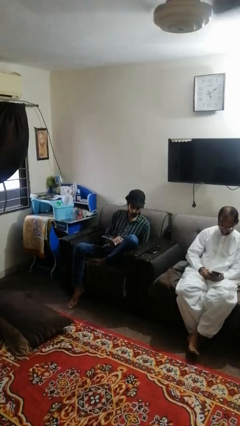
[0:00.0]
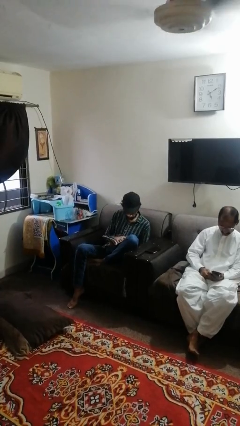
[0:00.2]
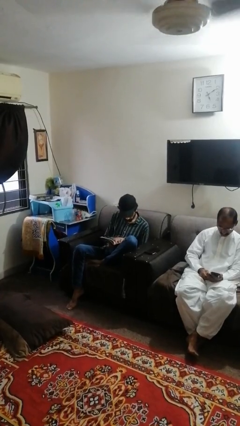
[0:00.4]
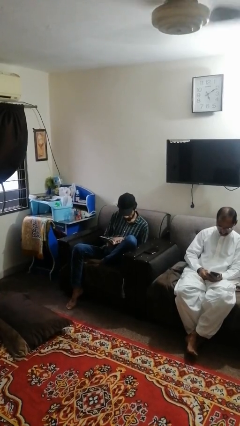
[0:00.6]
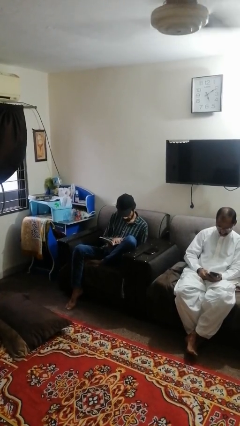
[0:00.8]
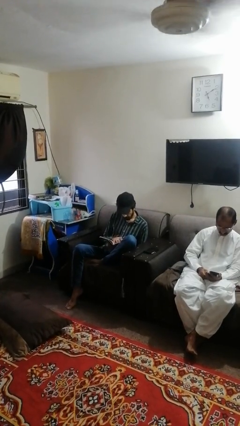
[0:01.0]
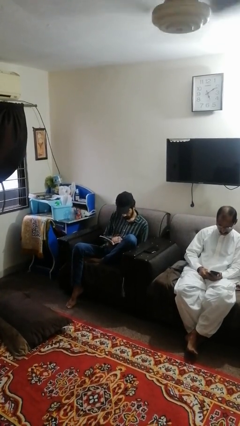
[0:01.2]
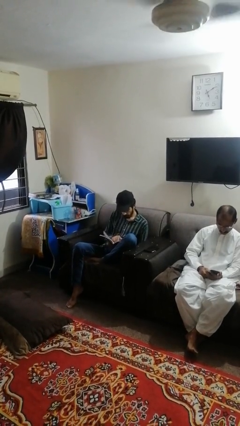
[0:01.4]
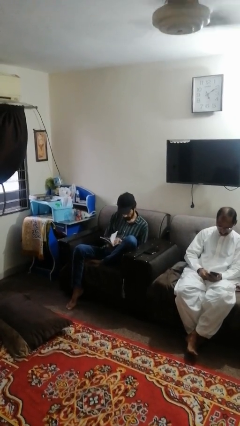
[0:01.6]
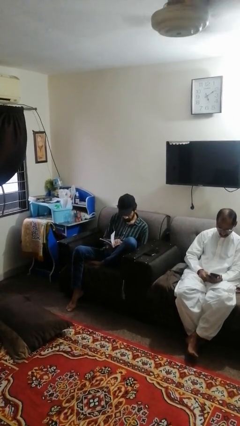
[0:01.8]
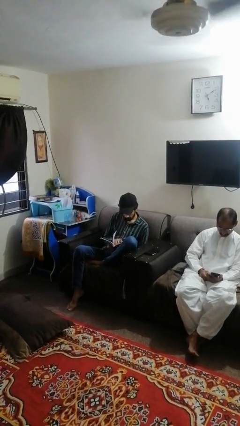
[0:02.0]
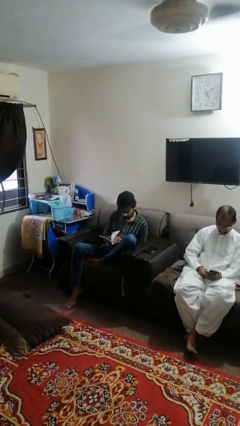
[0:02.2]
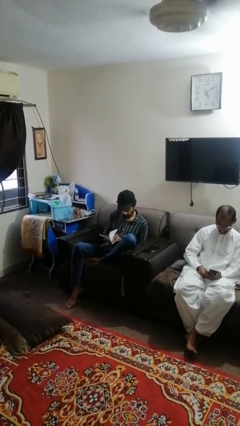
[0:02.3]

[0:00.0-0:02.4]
person reads book

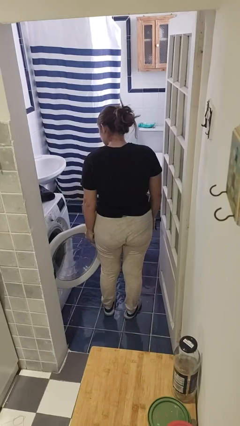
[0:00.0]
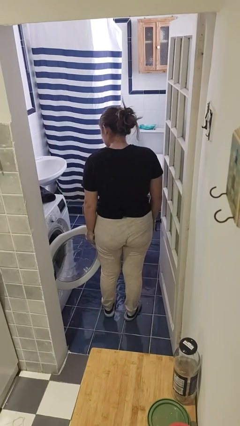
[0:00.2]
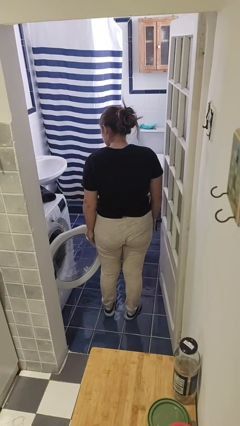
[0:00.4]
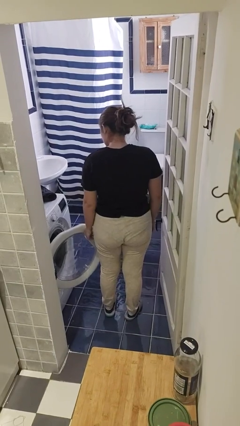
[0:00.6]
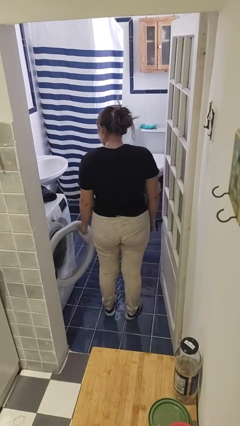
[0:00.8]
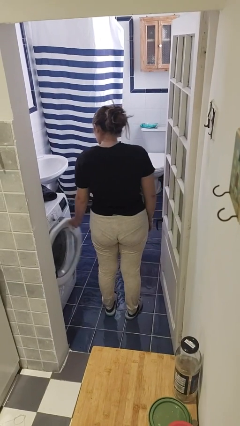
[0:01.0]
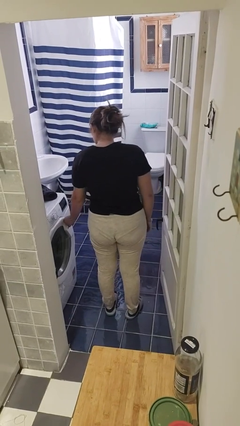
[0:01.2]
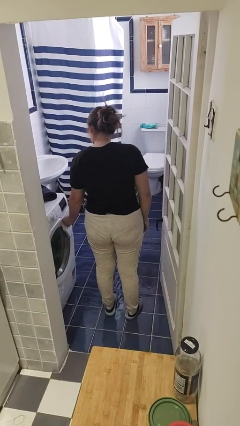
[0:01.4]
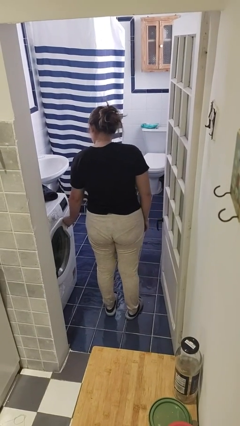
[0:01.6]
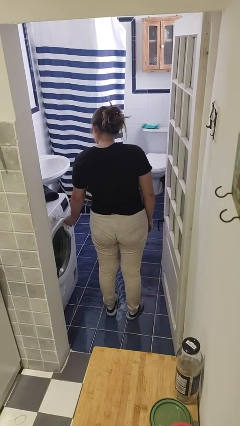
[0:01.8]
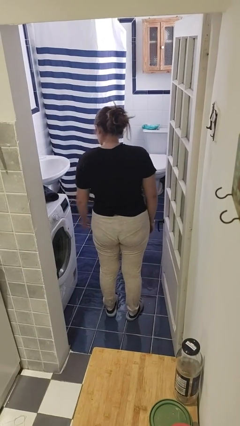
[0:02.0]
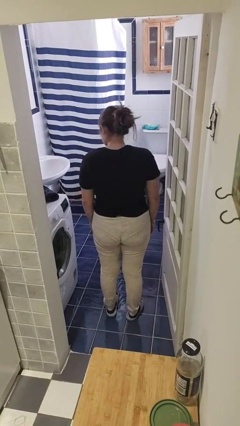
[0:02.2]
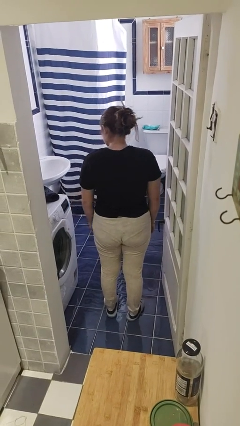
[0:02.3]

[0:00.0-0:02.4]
person closes clothes washer

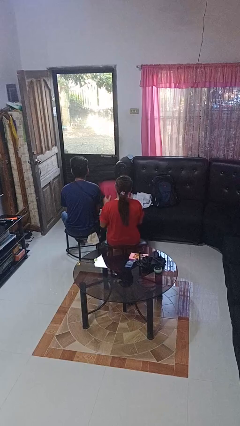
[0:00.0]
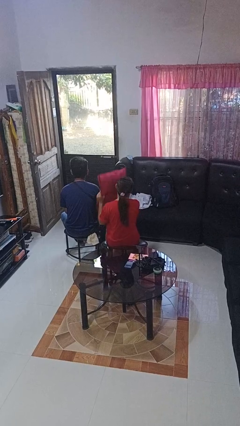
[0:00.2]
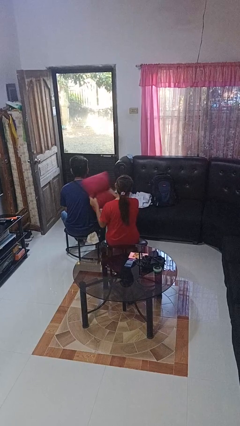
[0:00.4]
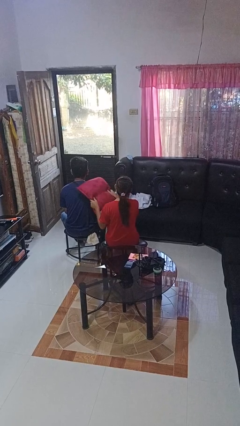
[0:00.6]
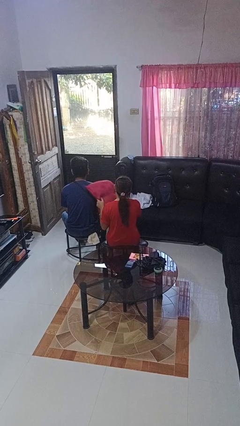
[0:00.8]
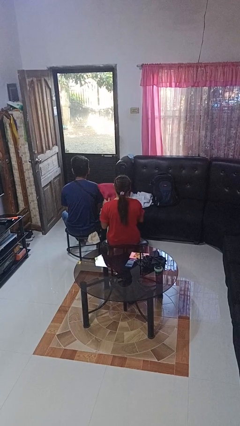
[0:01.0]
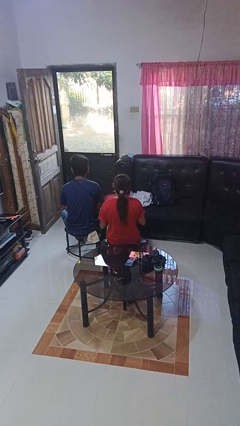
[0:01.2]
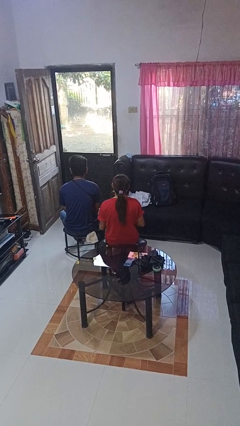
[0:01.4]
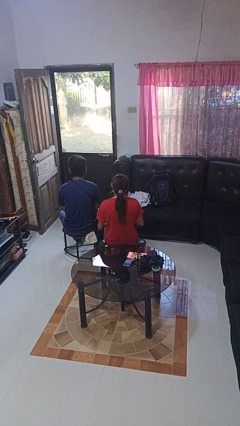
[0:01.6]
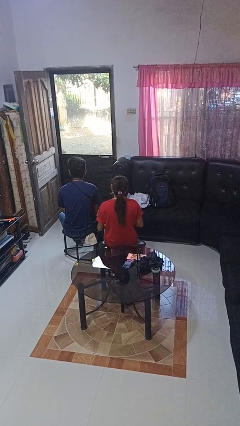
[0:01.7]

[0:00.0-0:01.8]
person hits person with pillow

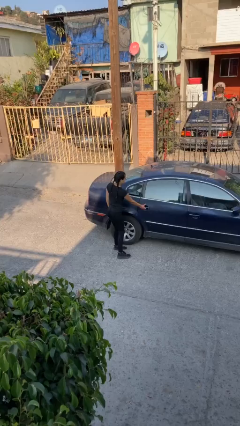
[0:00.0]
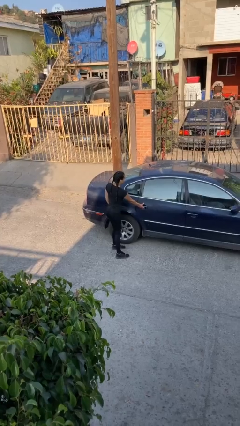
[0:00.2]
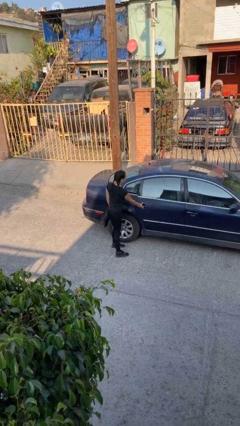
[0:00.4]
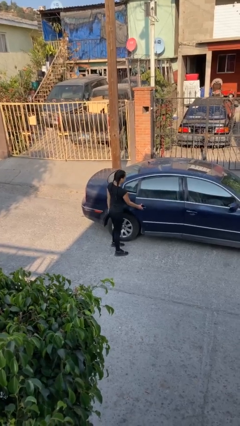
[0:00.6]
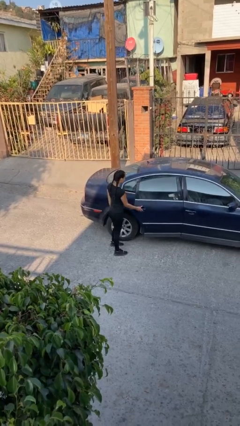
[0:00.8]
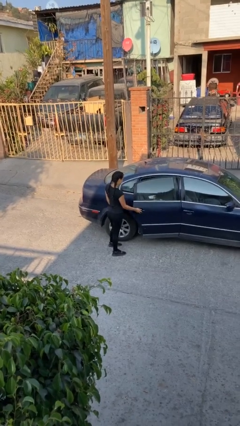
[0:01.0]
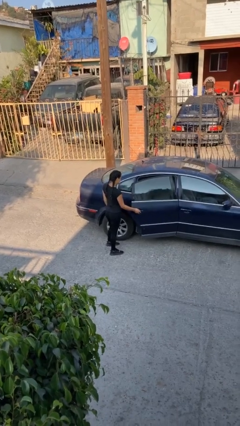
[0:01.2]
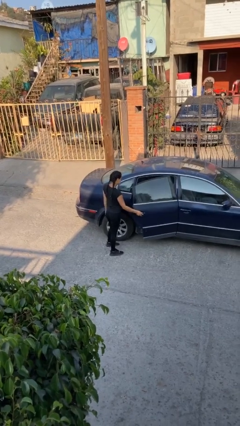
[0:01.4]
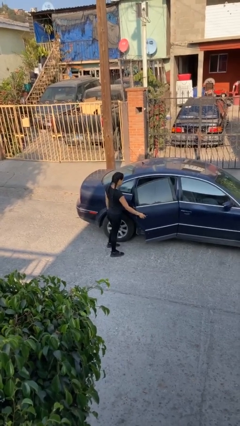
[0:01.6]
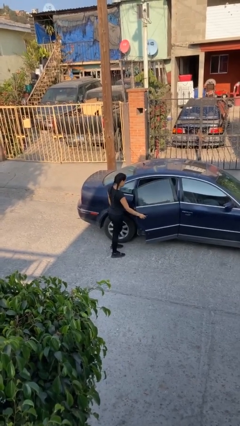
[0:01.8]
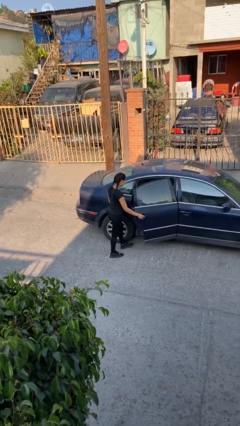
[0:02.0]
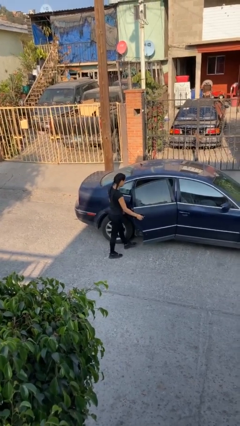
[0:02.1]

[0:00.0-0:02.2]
person opens car door

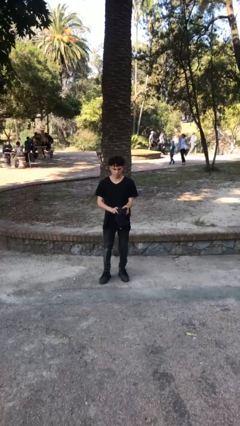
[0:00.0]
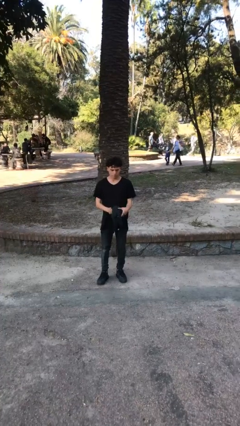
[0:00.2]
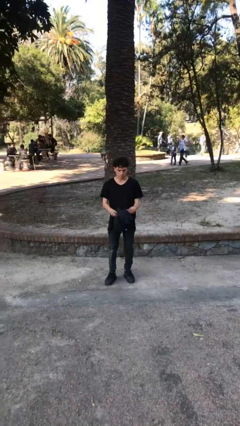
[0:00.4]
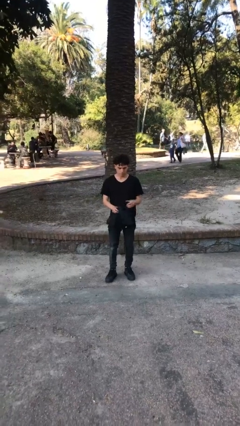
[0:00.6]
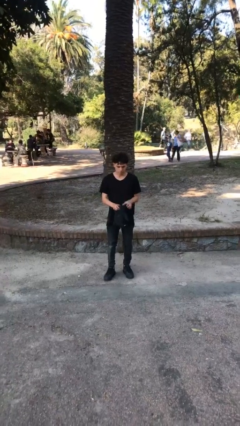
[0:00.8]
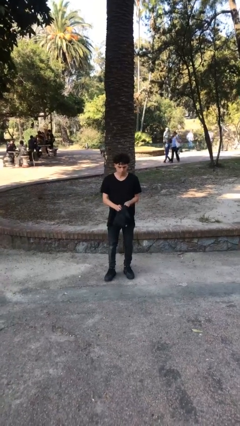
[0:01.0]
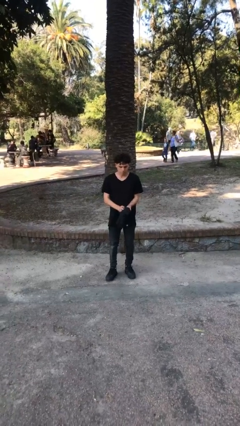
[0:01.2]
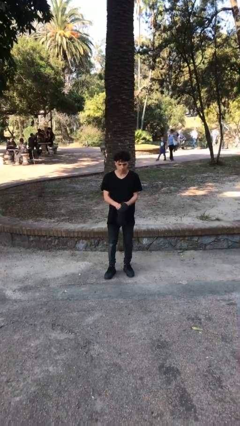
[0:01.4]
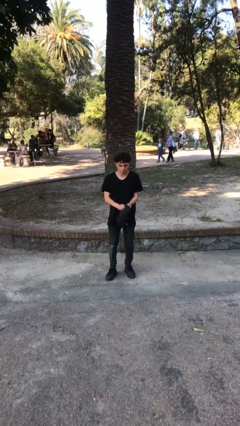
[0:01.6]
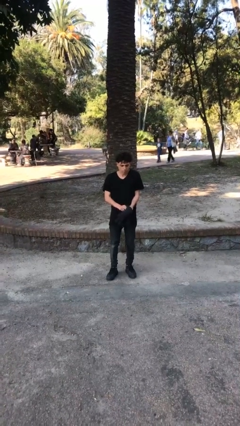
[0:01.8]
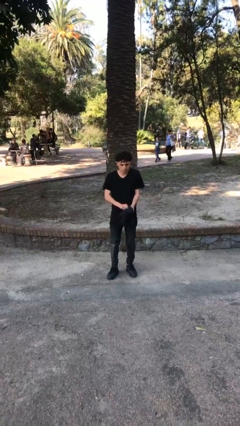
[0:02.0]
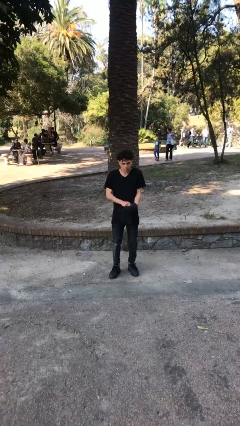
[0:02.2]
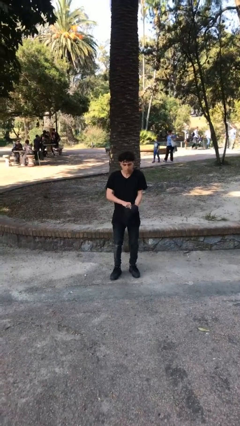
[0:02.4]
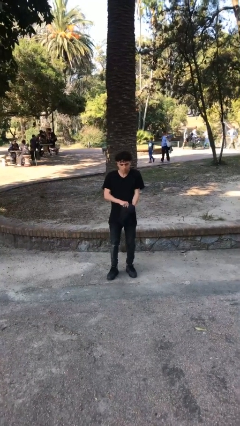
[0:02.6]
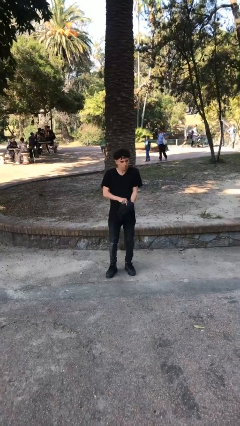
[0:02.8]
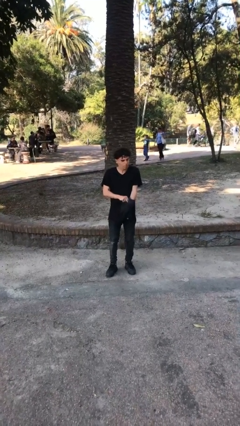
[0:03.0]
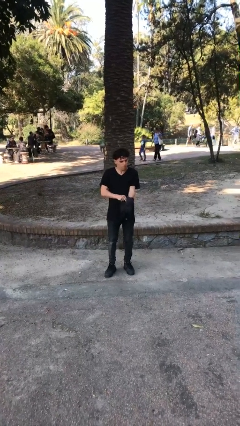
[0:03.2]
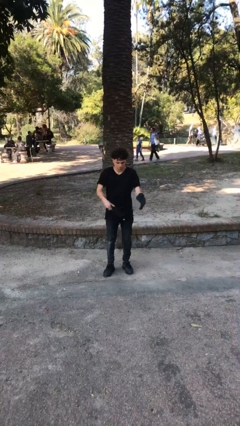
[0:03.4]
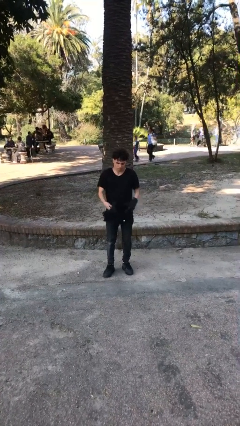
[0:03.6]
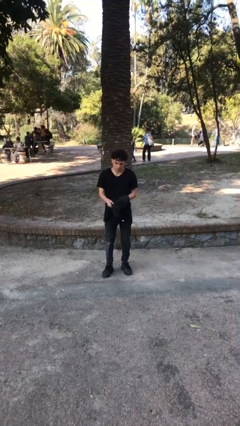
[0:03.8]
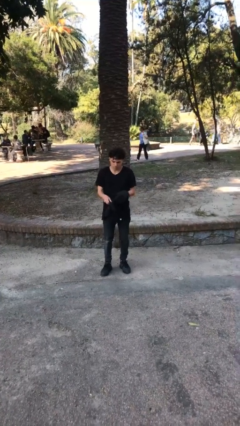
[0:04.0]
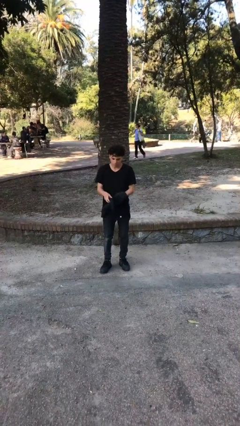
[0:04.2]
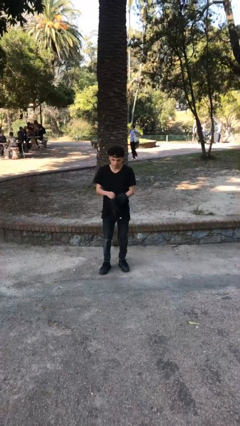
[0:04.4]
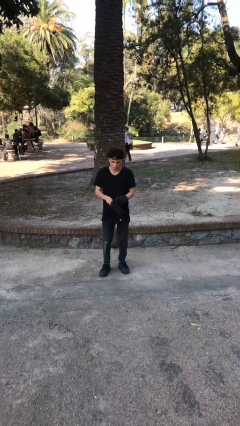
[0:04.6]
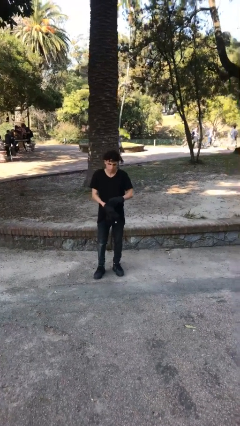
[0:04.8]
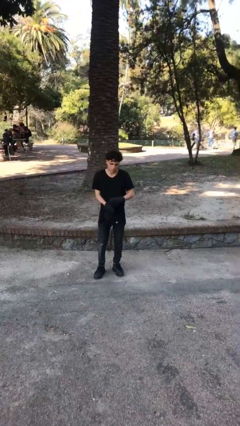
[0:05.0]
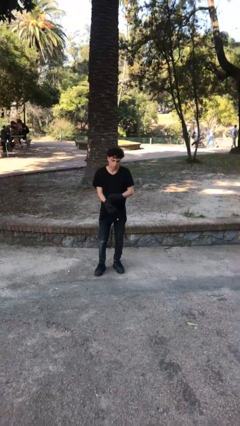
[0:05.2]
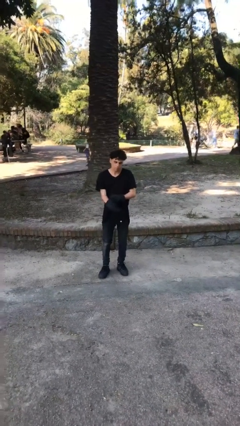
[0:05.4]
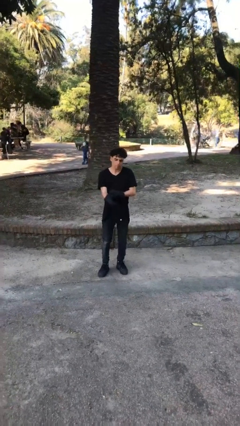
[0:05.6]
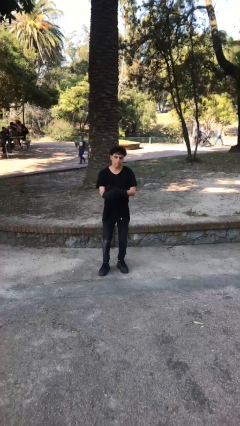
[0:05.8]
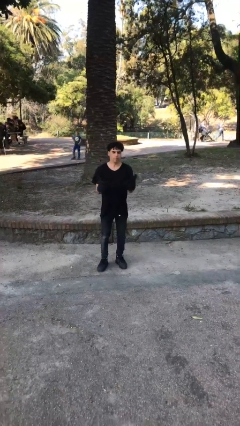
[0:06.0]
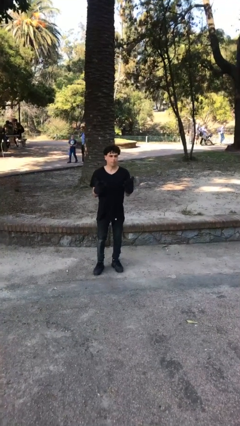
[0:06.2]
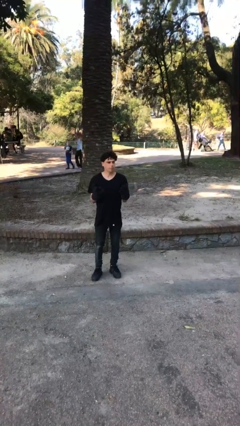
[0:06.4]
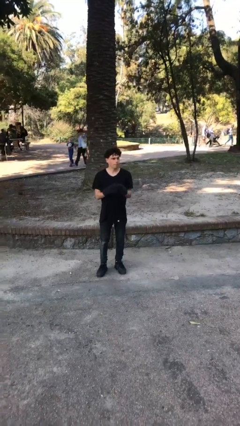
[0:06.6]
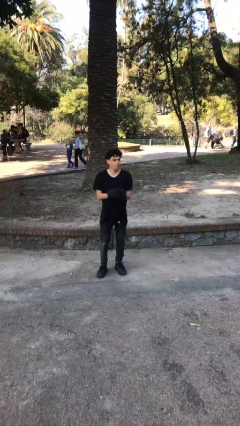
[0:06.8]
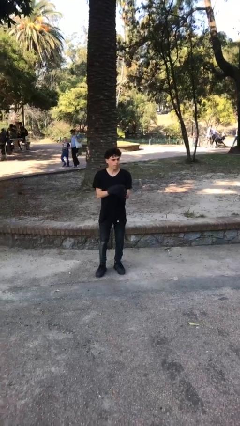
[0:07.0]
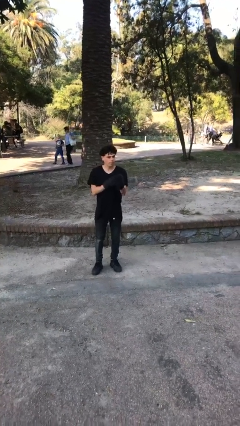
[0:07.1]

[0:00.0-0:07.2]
person puts on gloves

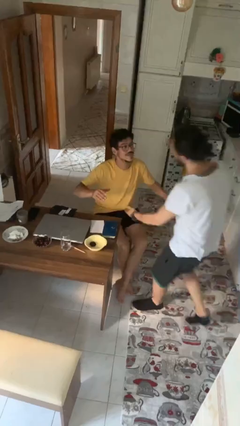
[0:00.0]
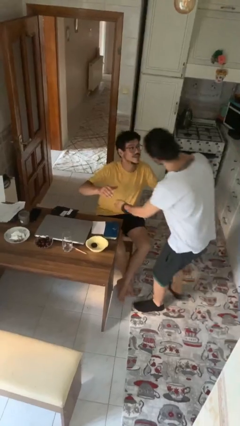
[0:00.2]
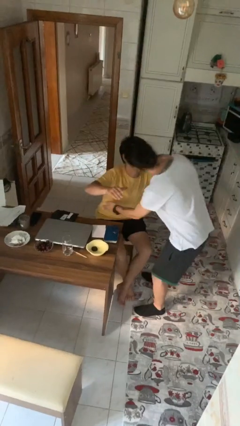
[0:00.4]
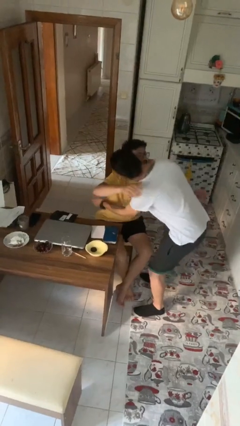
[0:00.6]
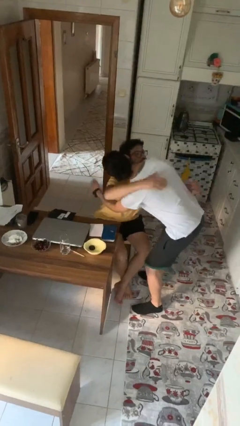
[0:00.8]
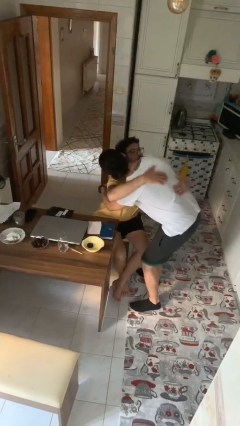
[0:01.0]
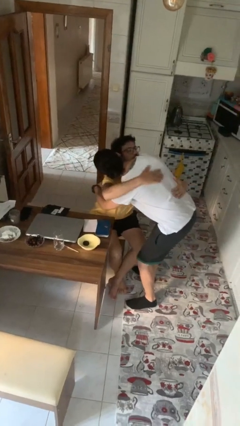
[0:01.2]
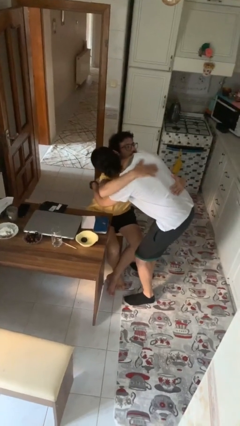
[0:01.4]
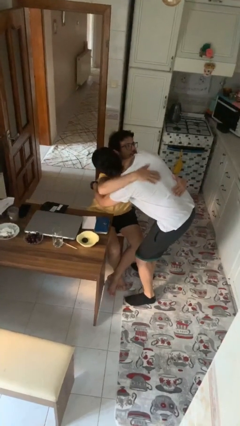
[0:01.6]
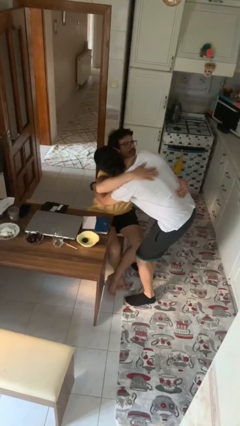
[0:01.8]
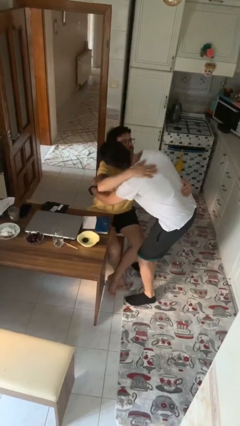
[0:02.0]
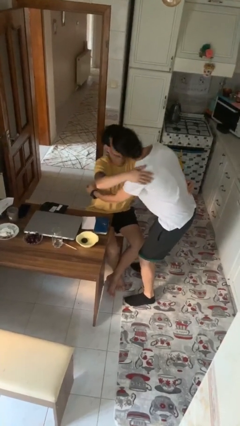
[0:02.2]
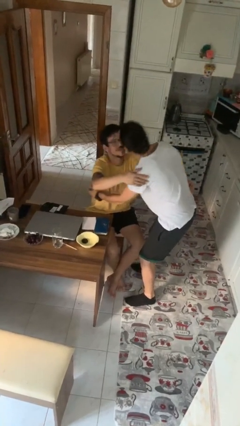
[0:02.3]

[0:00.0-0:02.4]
person embraces person
